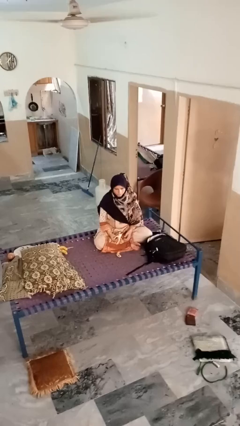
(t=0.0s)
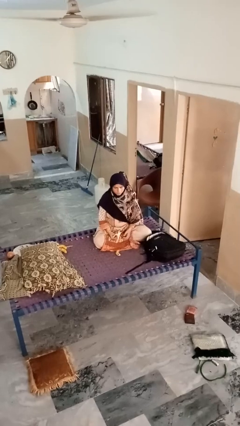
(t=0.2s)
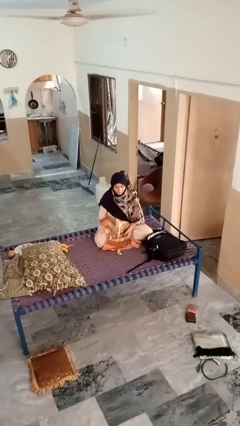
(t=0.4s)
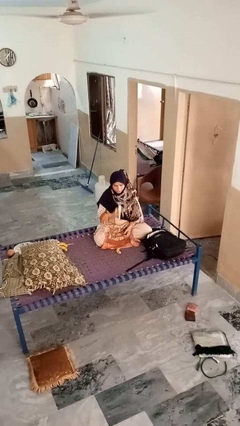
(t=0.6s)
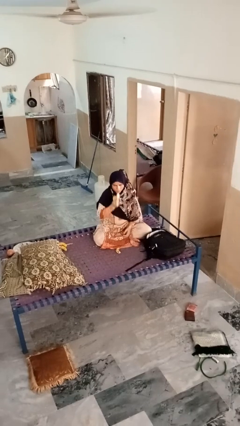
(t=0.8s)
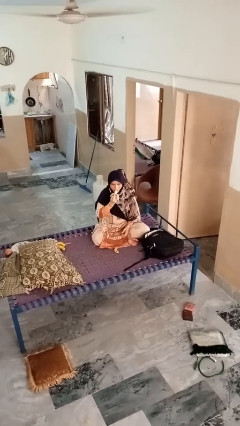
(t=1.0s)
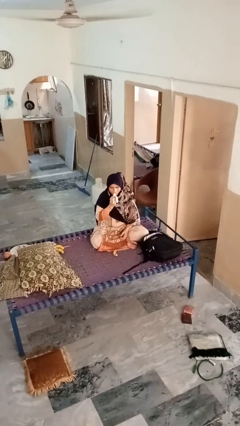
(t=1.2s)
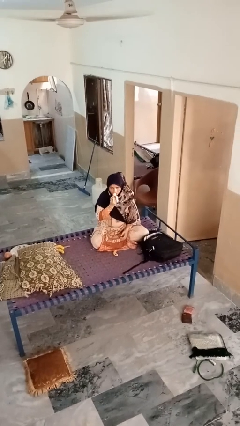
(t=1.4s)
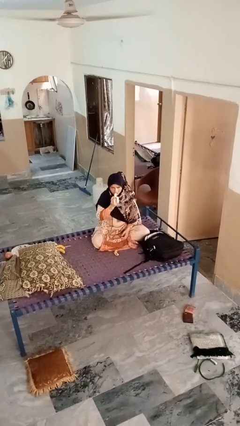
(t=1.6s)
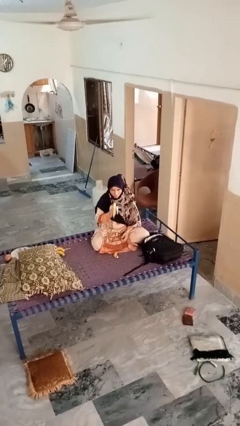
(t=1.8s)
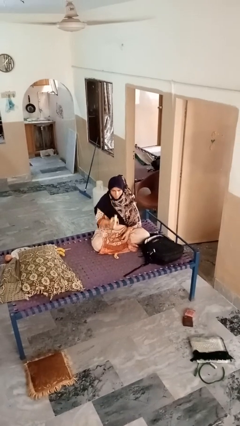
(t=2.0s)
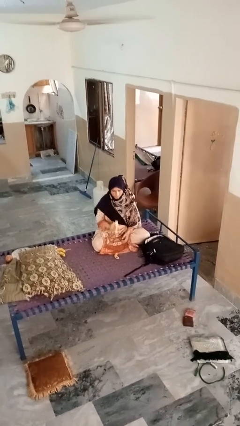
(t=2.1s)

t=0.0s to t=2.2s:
person eats banana

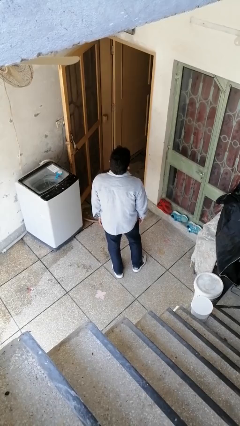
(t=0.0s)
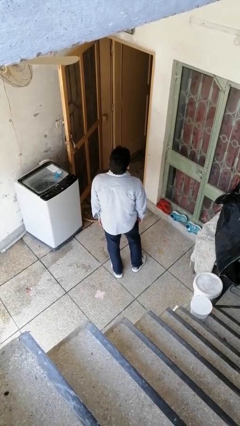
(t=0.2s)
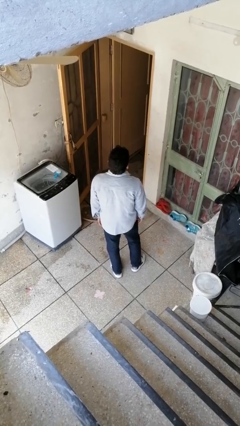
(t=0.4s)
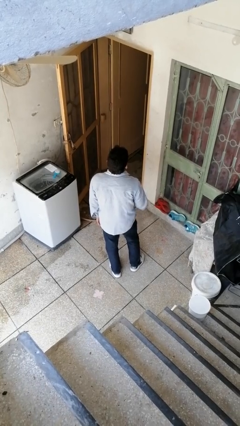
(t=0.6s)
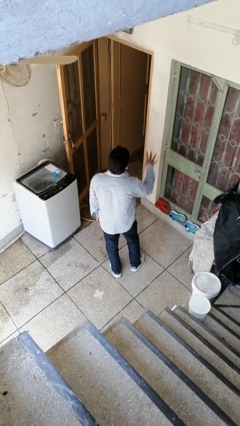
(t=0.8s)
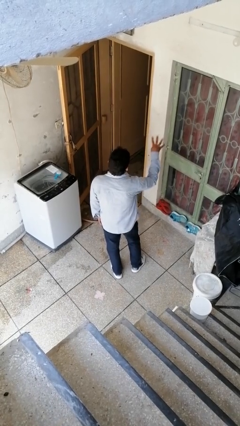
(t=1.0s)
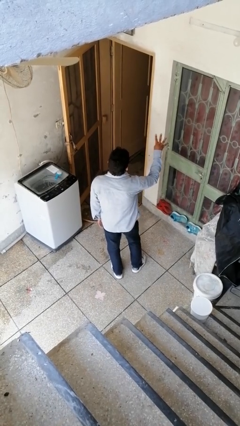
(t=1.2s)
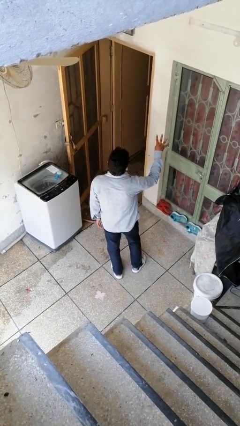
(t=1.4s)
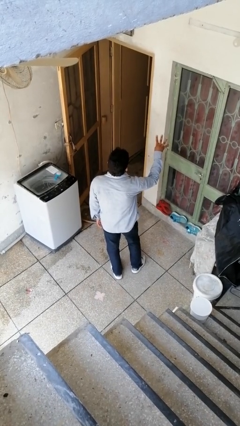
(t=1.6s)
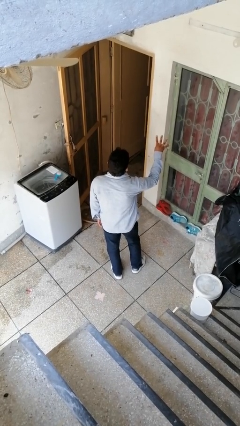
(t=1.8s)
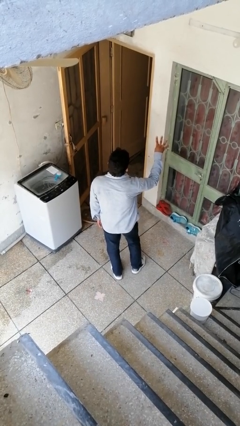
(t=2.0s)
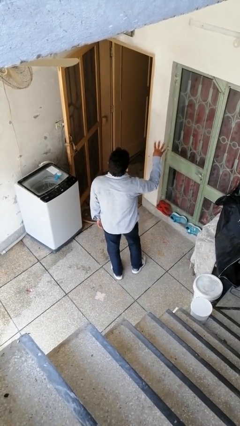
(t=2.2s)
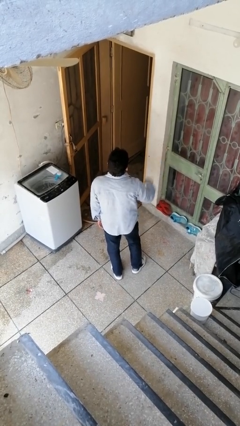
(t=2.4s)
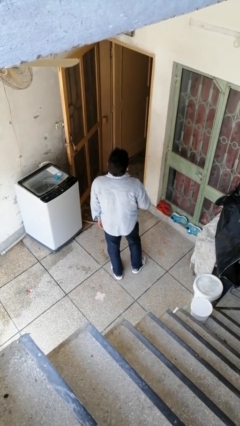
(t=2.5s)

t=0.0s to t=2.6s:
person gestures number four

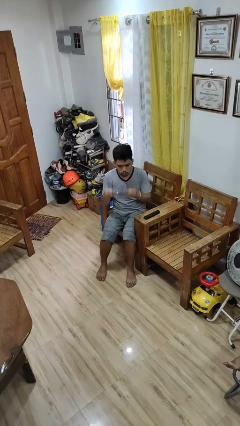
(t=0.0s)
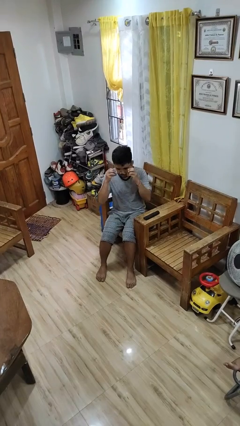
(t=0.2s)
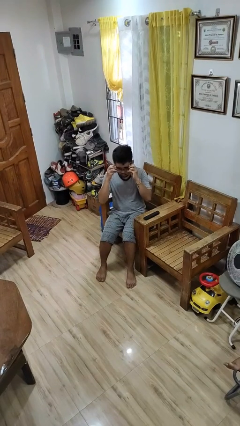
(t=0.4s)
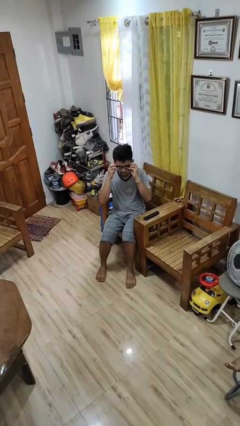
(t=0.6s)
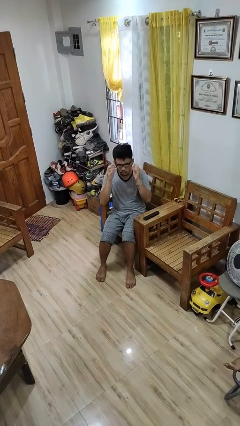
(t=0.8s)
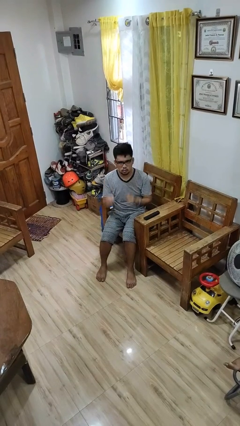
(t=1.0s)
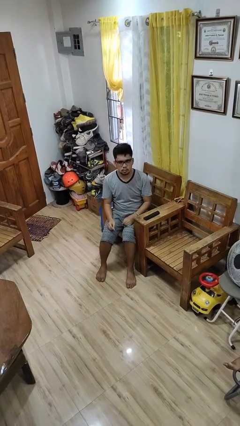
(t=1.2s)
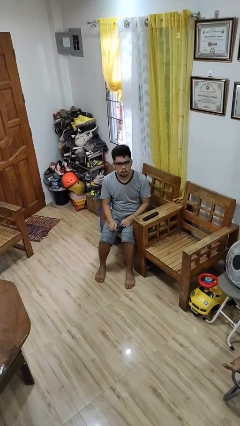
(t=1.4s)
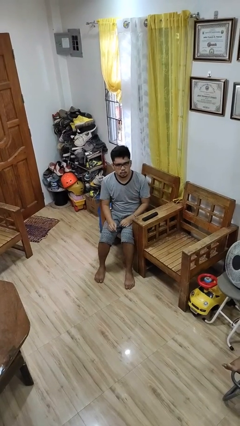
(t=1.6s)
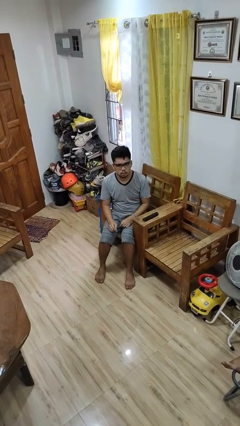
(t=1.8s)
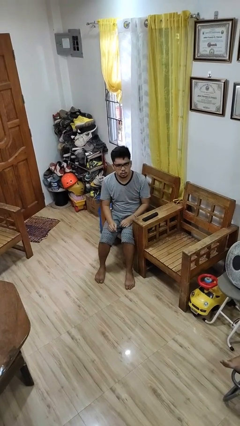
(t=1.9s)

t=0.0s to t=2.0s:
person puts on glasses

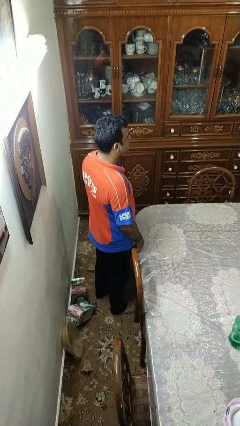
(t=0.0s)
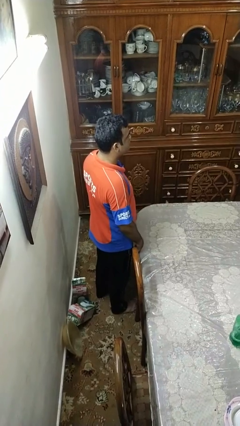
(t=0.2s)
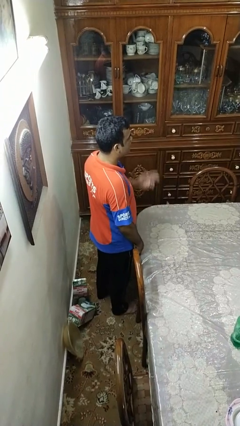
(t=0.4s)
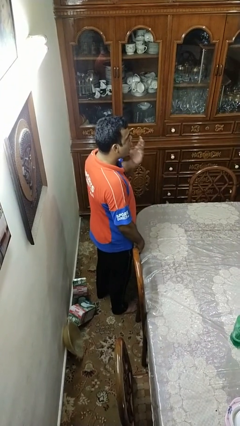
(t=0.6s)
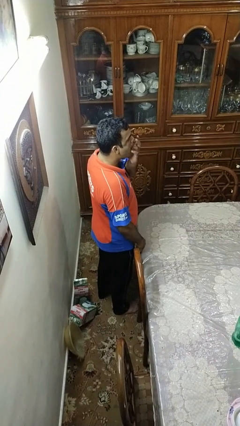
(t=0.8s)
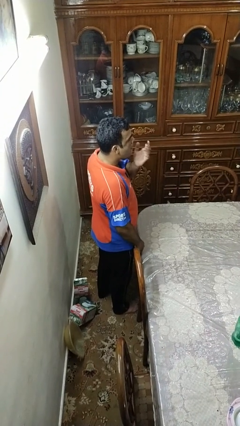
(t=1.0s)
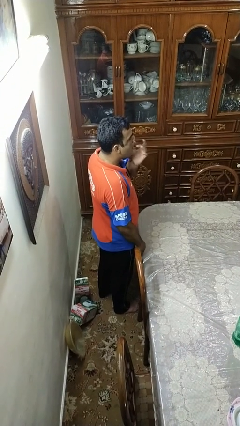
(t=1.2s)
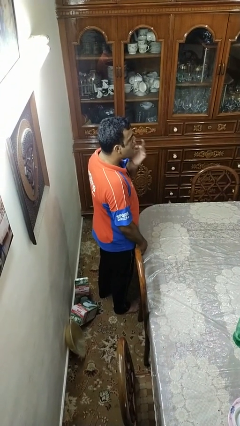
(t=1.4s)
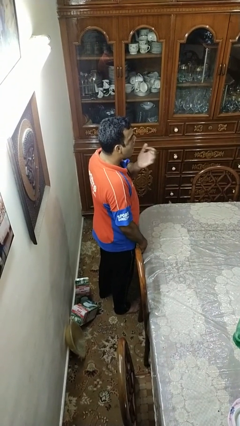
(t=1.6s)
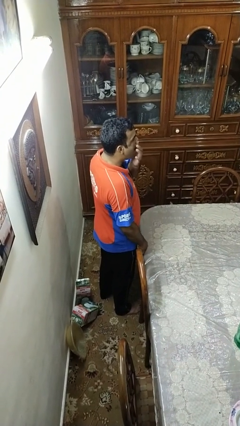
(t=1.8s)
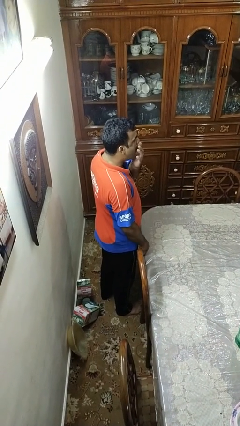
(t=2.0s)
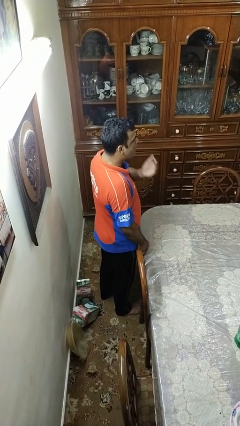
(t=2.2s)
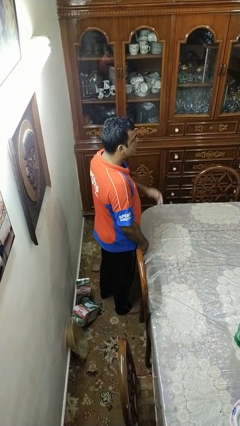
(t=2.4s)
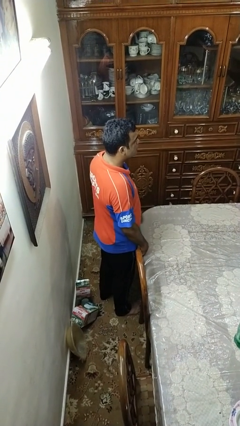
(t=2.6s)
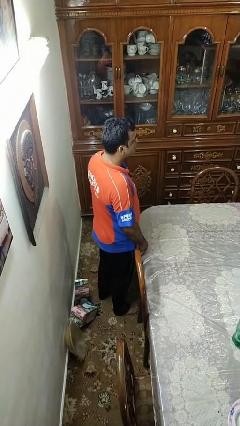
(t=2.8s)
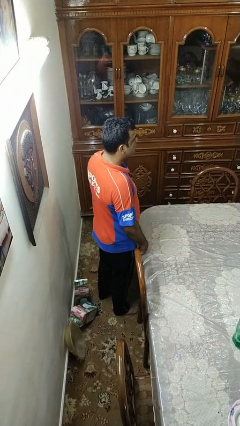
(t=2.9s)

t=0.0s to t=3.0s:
person licks fingers

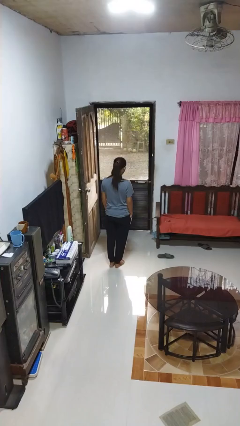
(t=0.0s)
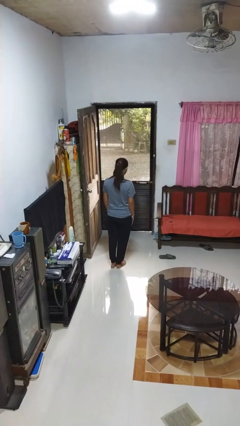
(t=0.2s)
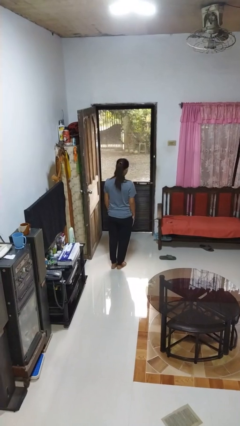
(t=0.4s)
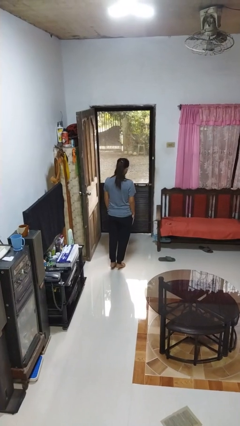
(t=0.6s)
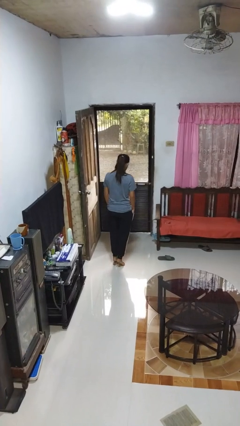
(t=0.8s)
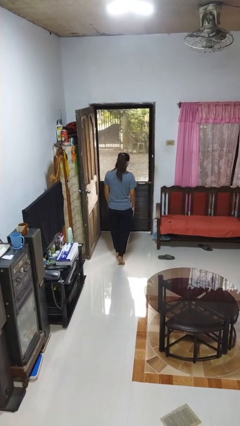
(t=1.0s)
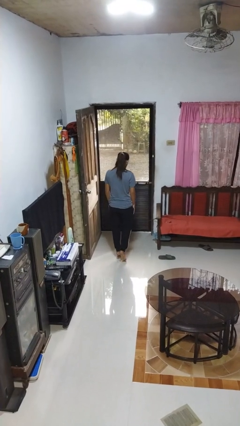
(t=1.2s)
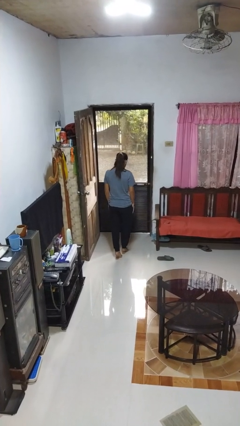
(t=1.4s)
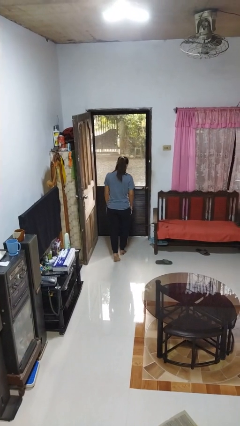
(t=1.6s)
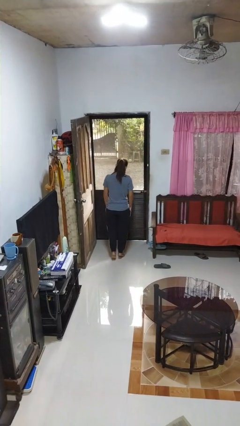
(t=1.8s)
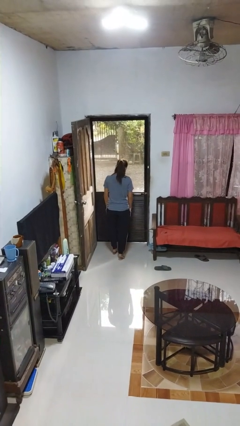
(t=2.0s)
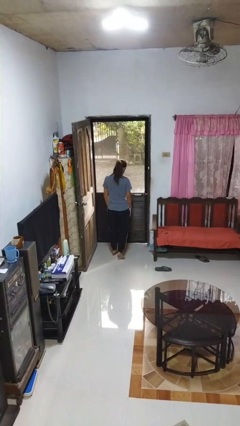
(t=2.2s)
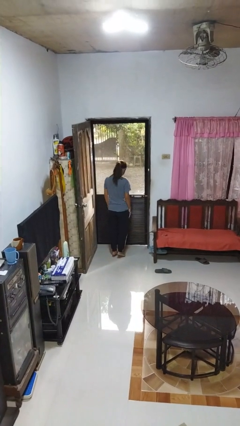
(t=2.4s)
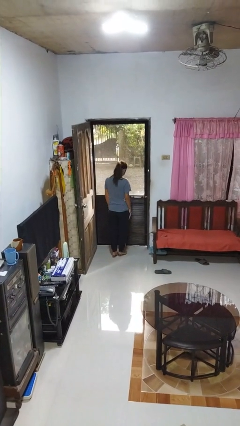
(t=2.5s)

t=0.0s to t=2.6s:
person walks tiptoe

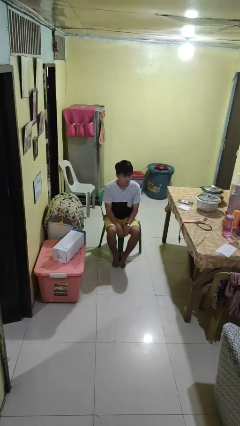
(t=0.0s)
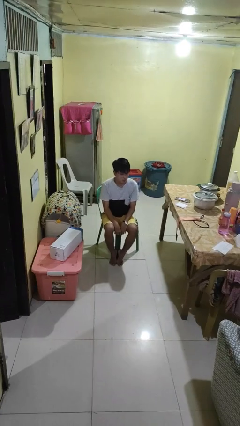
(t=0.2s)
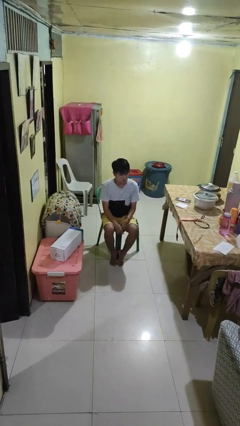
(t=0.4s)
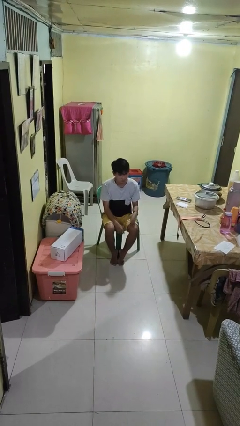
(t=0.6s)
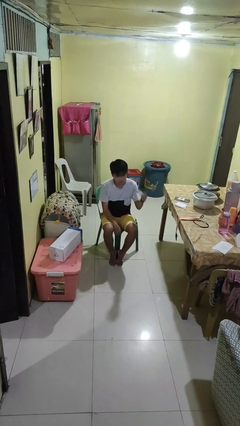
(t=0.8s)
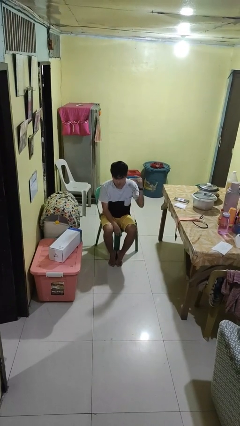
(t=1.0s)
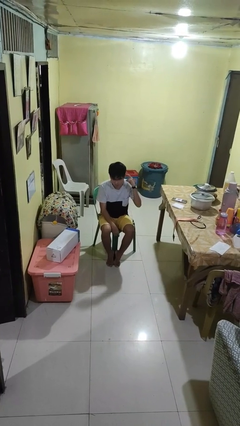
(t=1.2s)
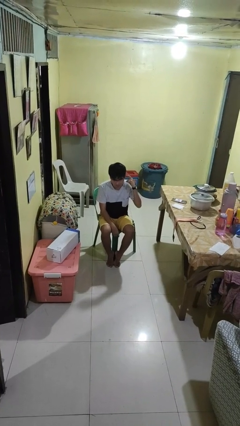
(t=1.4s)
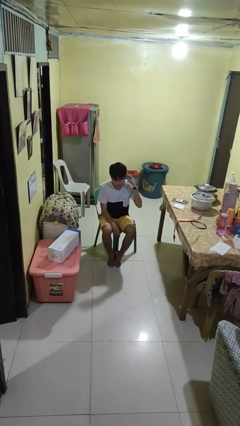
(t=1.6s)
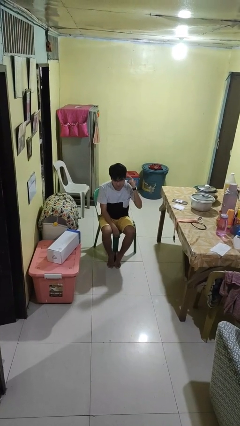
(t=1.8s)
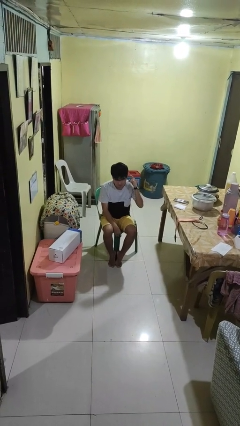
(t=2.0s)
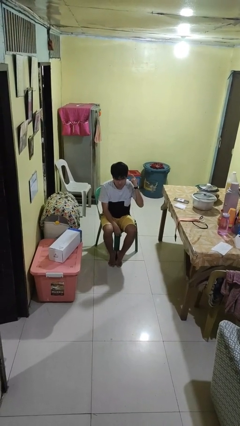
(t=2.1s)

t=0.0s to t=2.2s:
person gestures listen closely

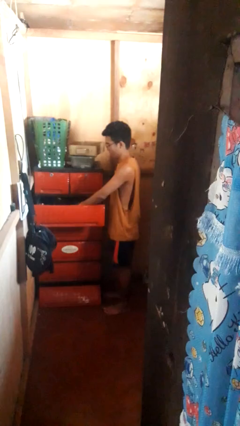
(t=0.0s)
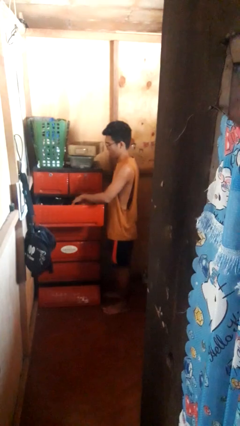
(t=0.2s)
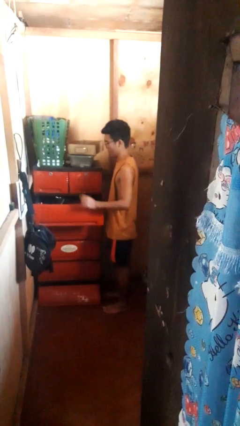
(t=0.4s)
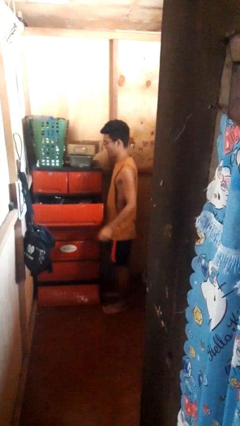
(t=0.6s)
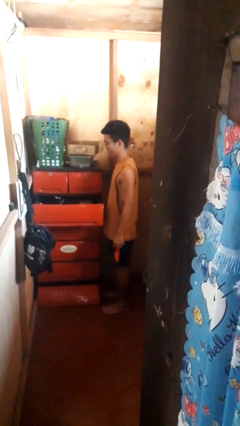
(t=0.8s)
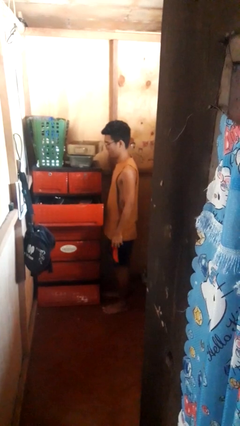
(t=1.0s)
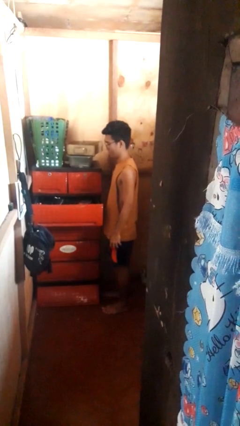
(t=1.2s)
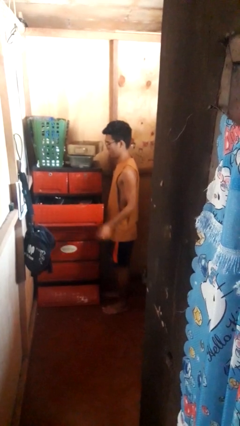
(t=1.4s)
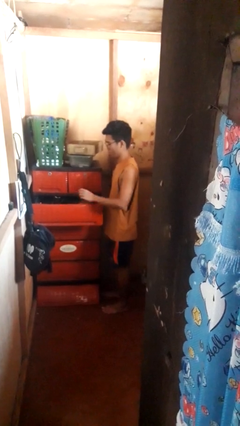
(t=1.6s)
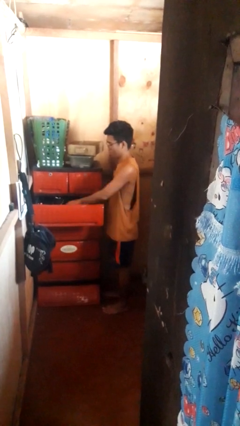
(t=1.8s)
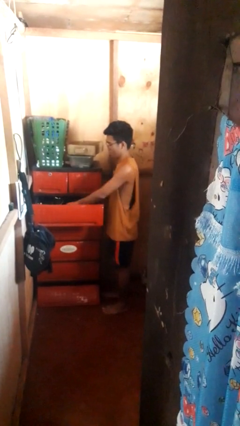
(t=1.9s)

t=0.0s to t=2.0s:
person puts clothes into dresser
